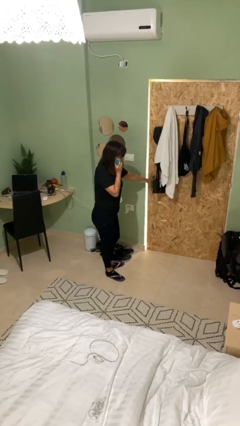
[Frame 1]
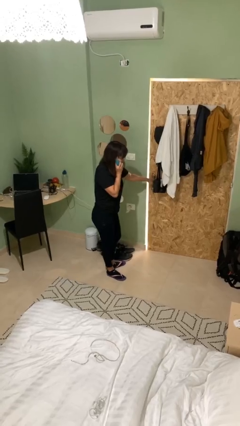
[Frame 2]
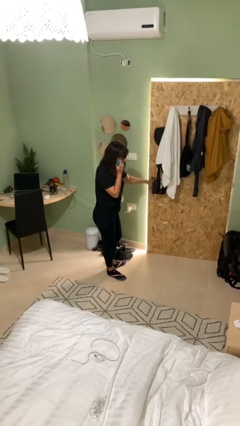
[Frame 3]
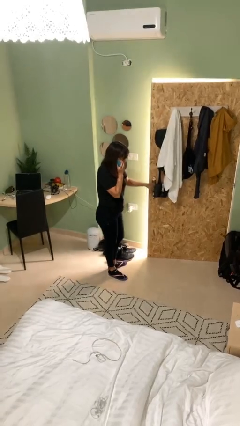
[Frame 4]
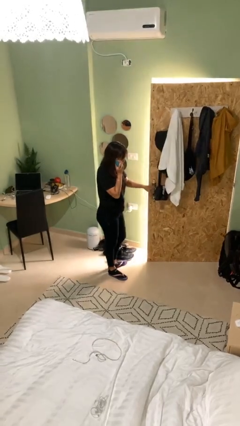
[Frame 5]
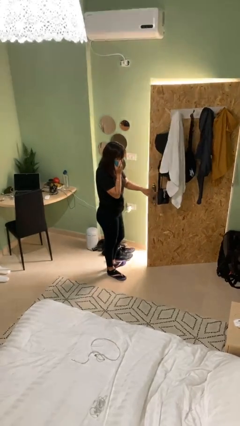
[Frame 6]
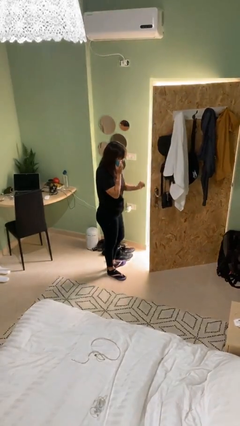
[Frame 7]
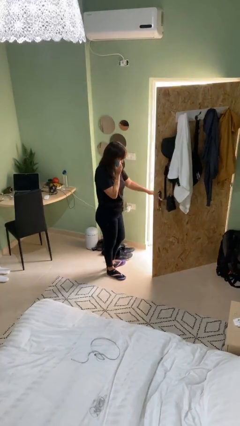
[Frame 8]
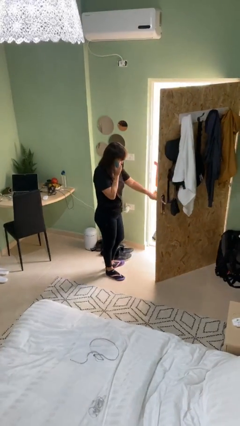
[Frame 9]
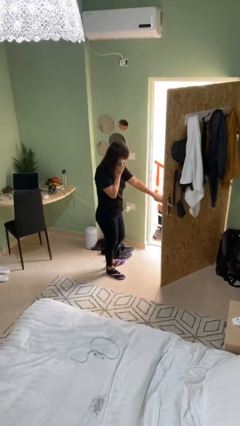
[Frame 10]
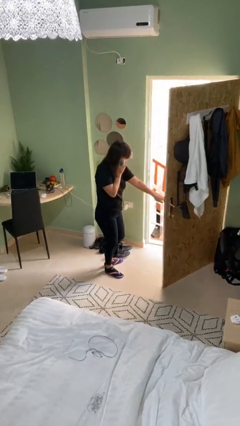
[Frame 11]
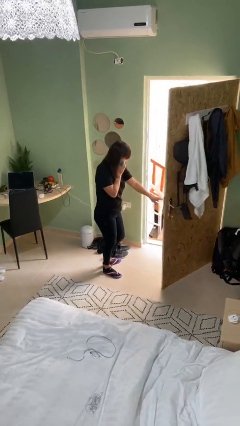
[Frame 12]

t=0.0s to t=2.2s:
person opens facility door

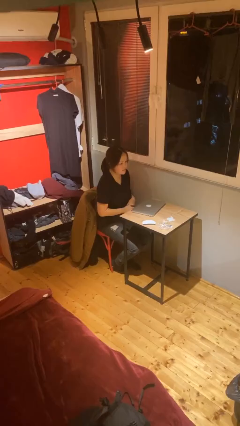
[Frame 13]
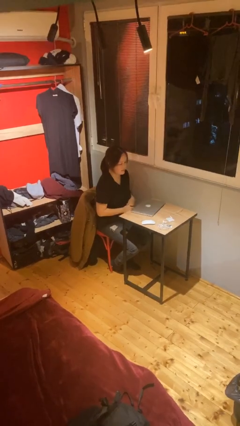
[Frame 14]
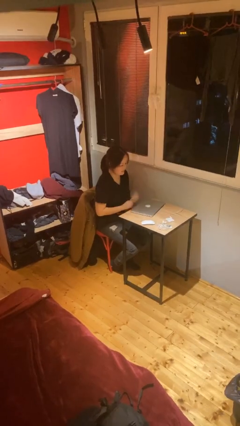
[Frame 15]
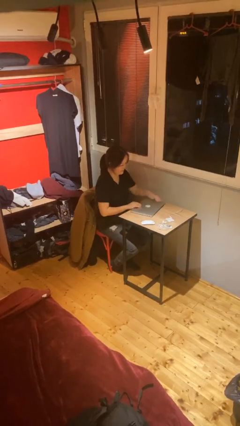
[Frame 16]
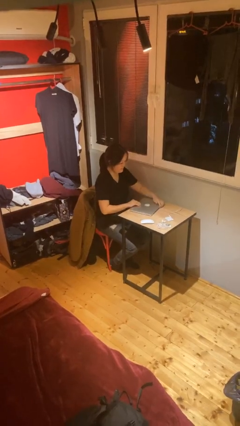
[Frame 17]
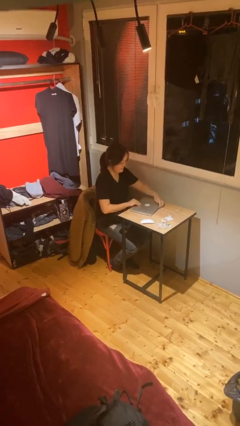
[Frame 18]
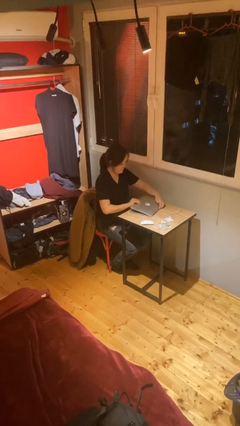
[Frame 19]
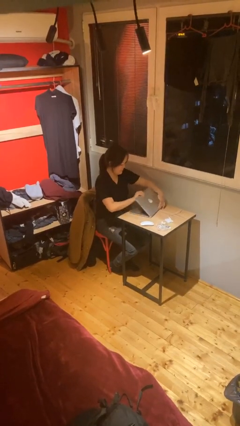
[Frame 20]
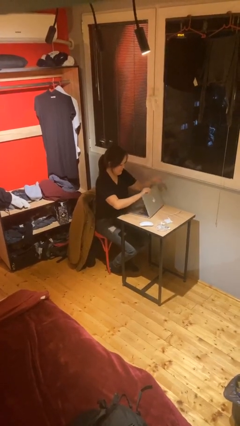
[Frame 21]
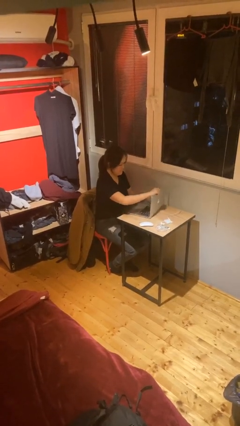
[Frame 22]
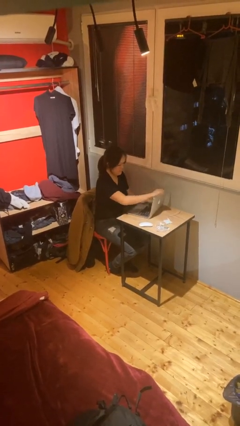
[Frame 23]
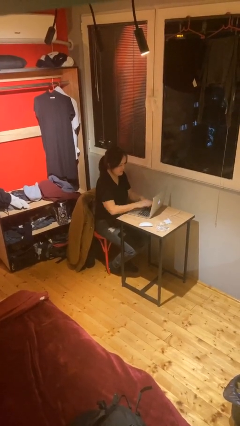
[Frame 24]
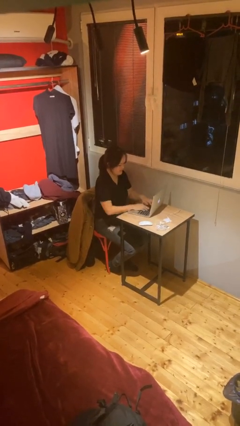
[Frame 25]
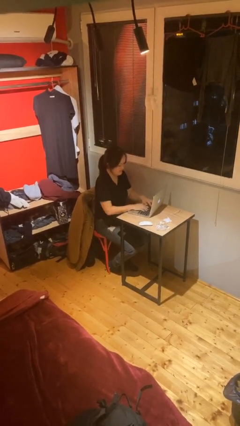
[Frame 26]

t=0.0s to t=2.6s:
person interacts with laptop

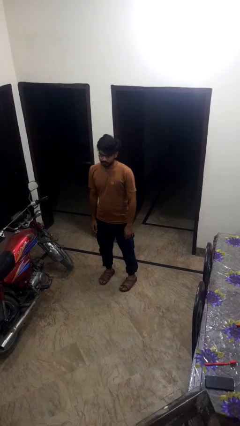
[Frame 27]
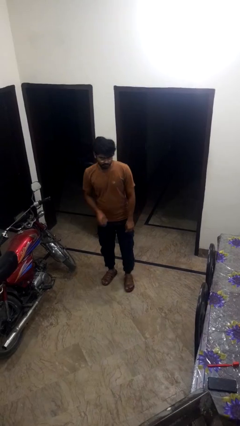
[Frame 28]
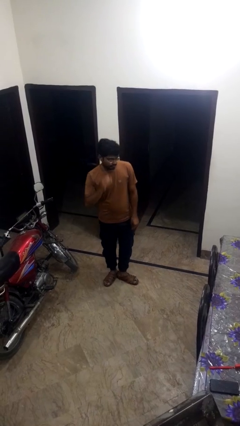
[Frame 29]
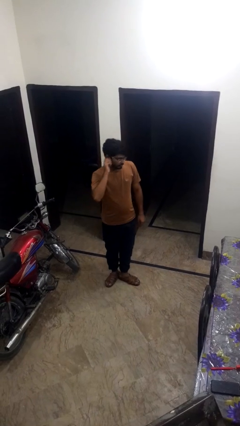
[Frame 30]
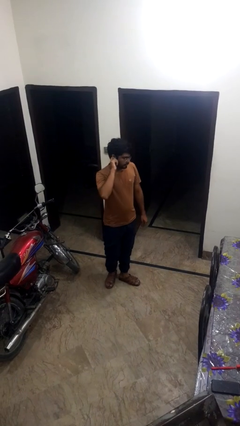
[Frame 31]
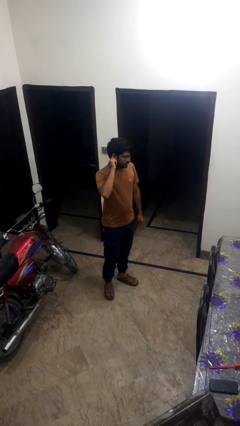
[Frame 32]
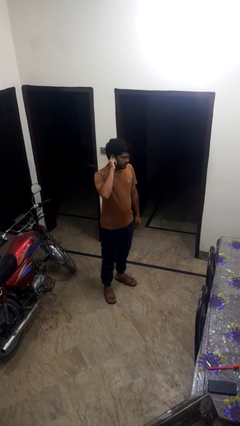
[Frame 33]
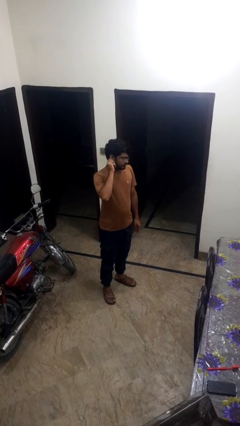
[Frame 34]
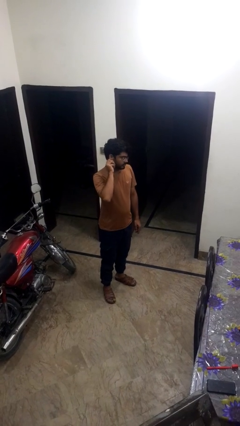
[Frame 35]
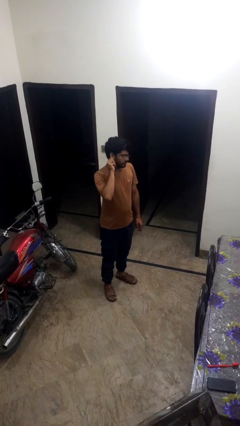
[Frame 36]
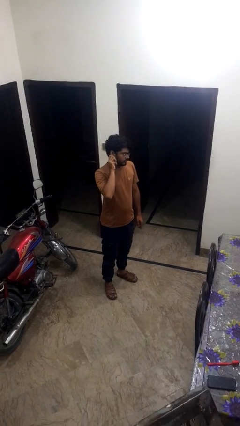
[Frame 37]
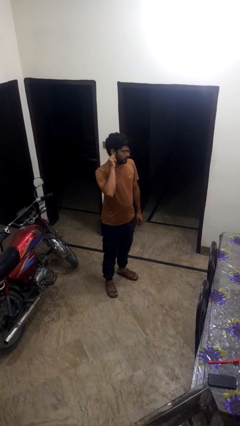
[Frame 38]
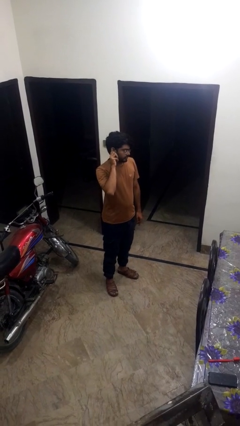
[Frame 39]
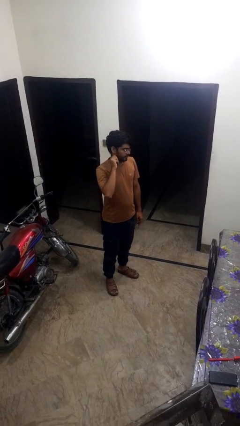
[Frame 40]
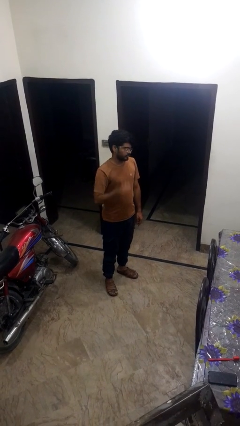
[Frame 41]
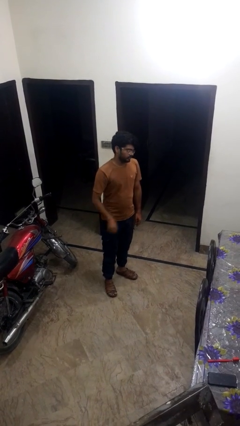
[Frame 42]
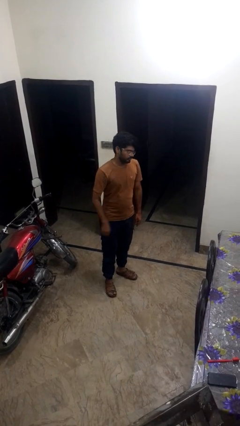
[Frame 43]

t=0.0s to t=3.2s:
person touches earlobe

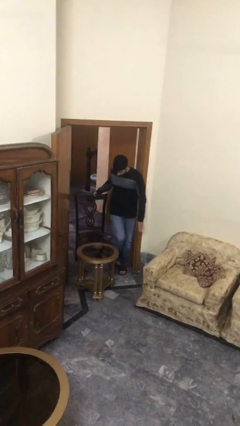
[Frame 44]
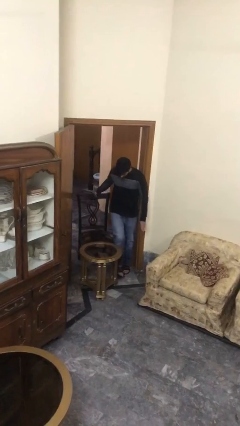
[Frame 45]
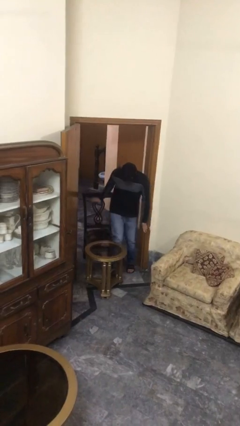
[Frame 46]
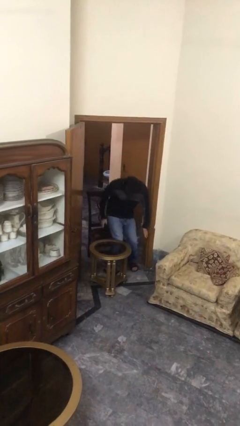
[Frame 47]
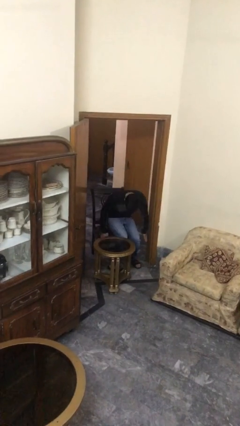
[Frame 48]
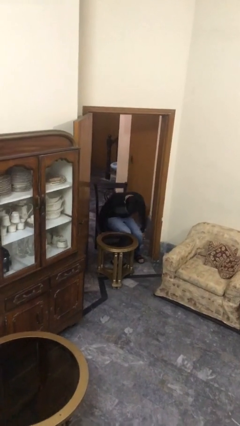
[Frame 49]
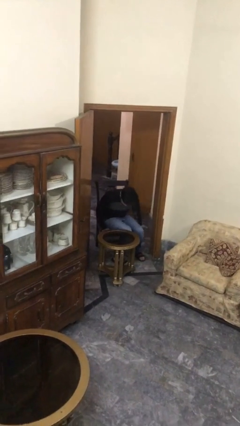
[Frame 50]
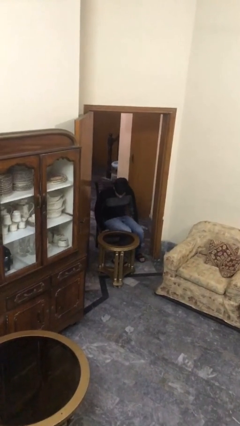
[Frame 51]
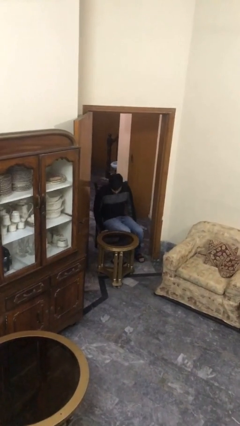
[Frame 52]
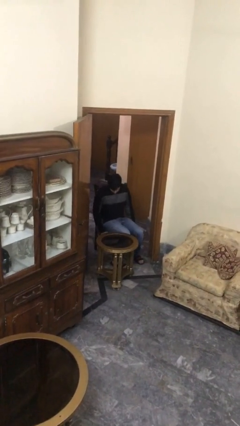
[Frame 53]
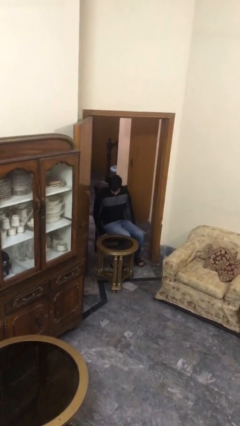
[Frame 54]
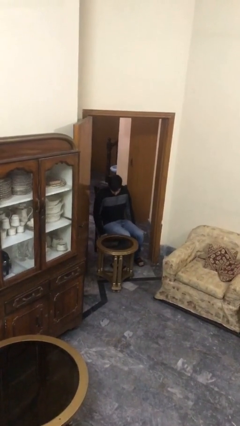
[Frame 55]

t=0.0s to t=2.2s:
person sits down

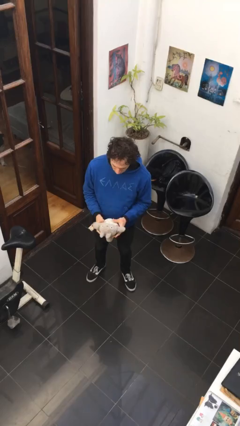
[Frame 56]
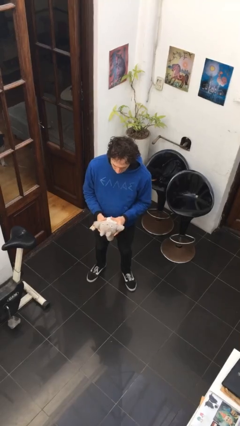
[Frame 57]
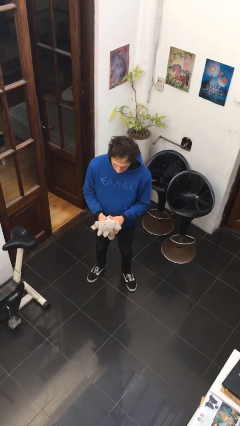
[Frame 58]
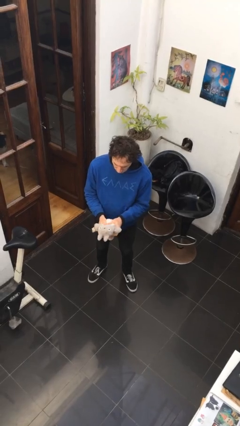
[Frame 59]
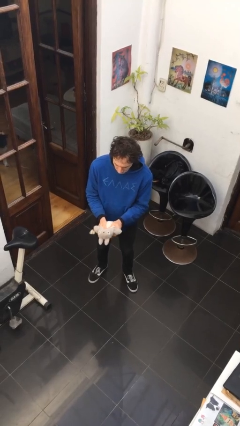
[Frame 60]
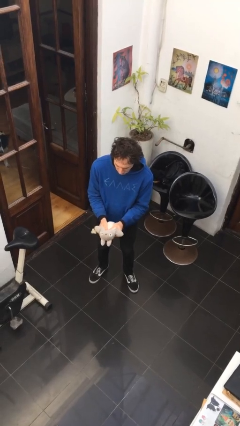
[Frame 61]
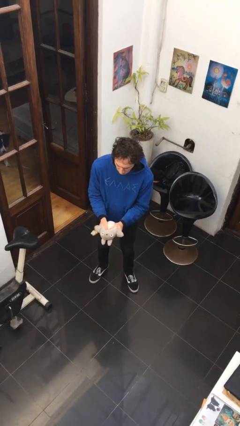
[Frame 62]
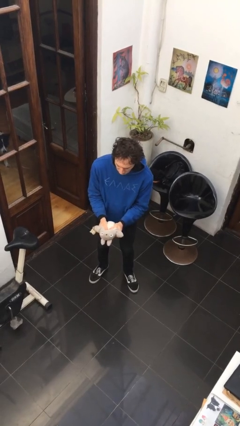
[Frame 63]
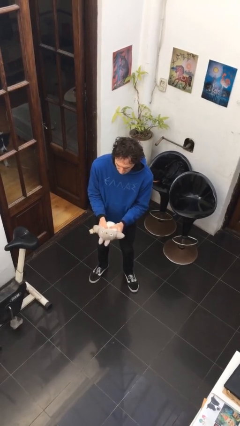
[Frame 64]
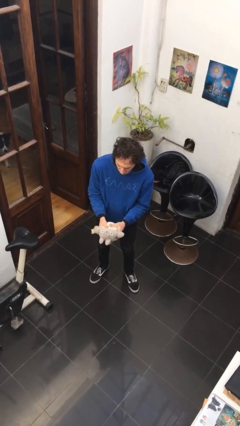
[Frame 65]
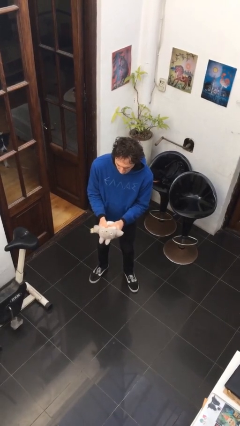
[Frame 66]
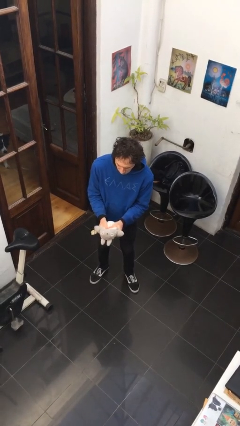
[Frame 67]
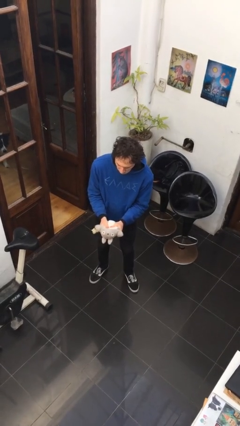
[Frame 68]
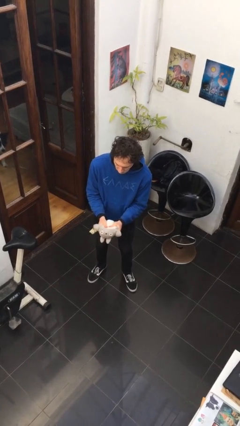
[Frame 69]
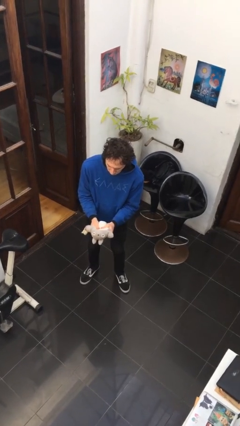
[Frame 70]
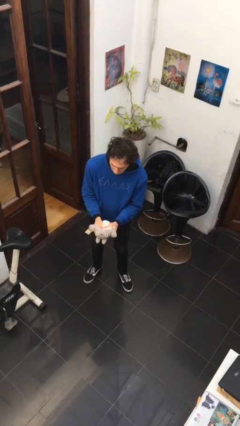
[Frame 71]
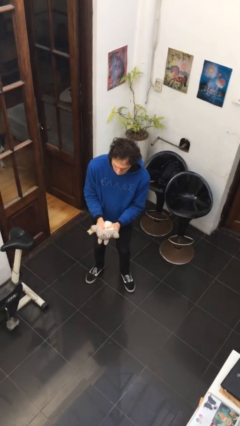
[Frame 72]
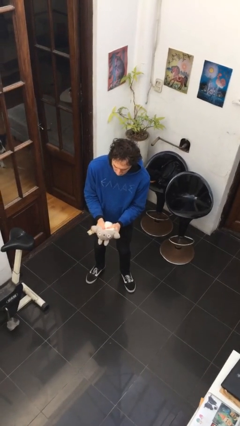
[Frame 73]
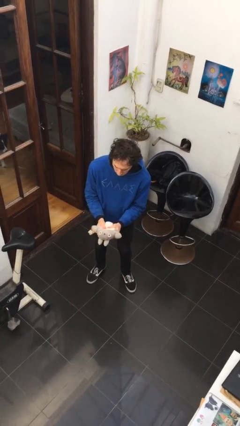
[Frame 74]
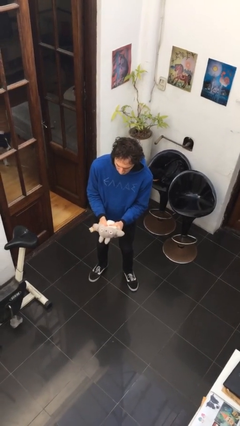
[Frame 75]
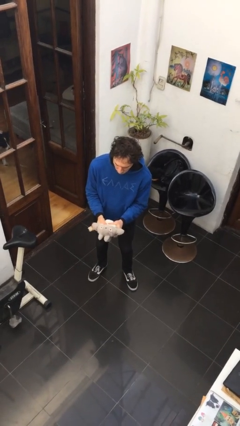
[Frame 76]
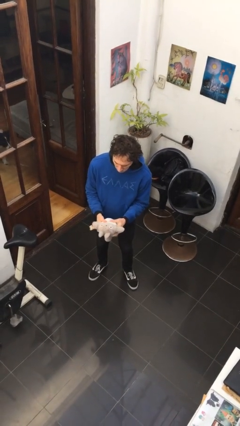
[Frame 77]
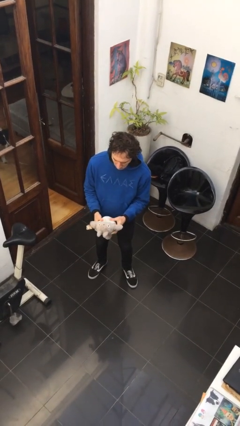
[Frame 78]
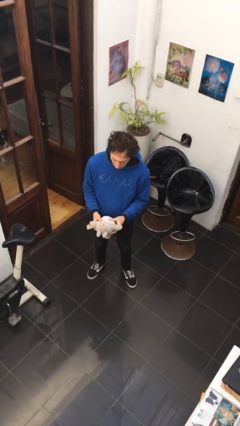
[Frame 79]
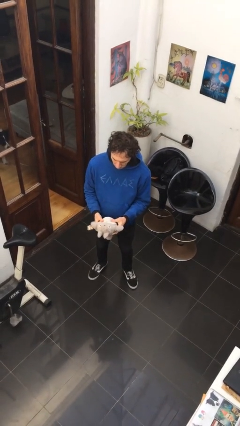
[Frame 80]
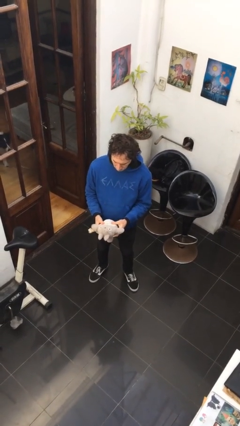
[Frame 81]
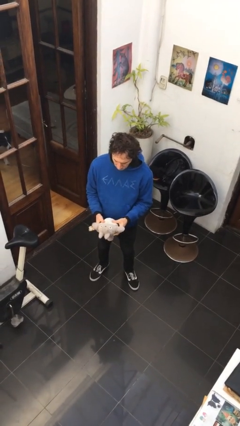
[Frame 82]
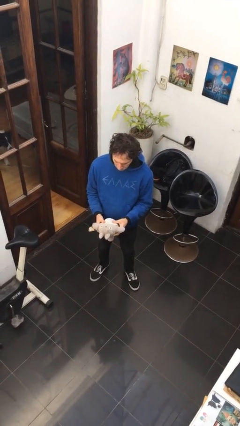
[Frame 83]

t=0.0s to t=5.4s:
person squeezes object

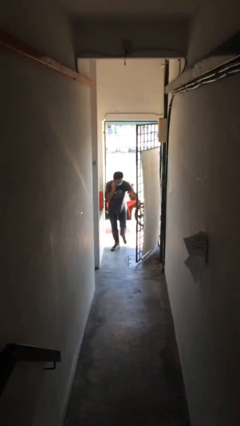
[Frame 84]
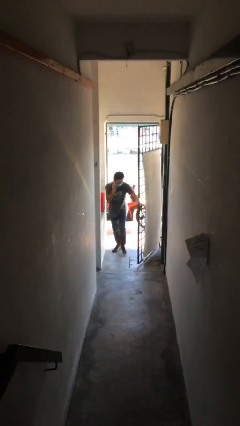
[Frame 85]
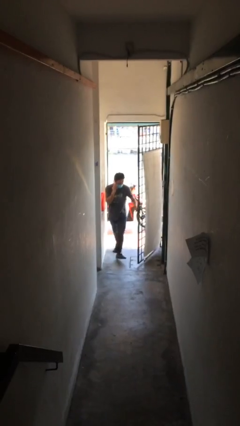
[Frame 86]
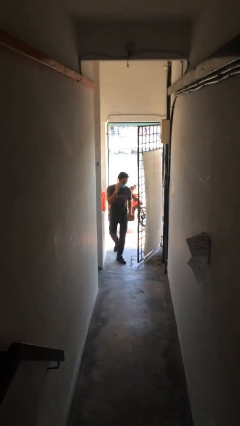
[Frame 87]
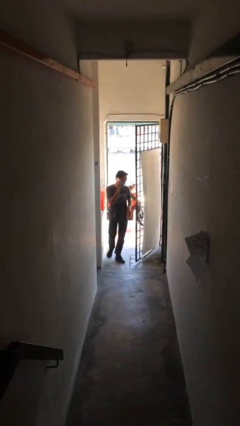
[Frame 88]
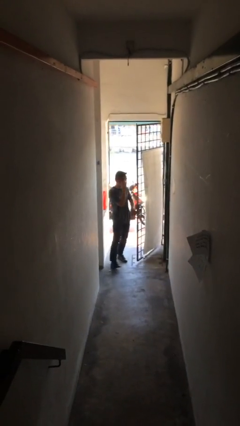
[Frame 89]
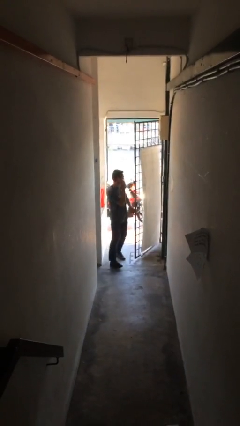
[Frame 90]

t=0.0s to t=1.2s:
person enters scene through structure
